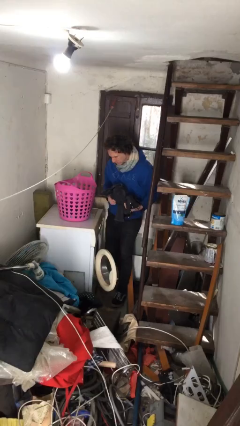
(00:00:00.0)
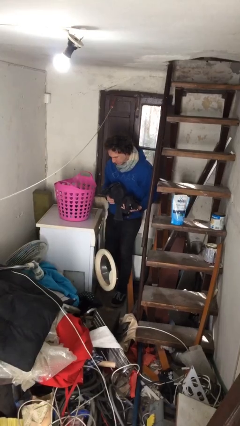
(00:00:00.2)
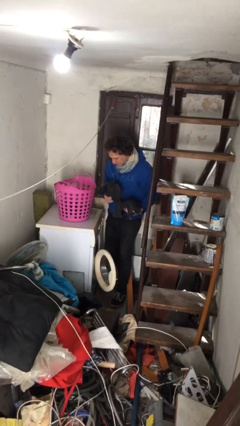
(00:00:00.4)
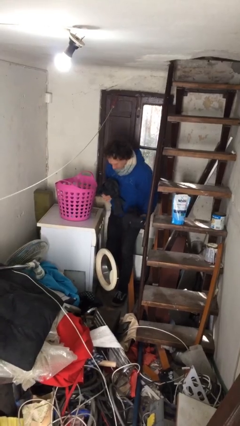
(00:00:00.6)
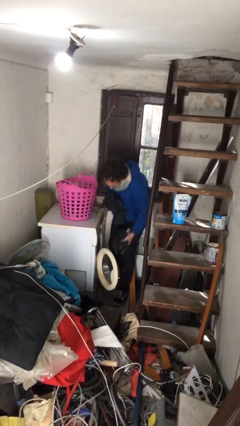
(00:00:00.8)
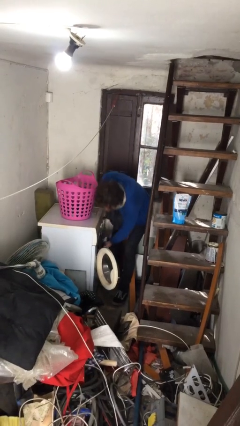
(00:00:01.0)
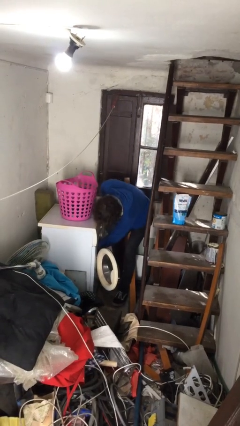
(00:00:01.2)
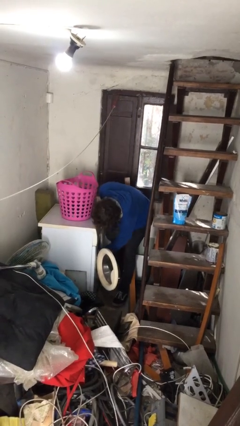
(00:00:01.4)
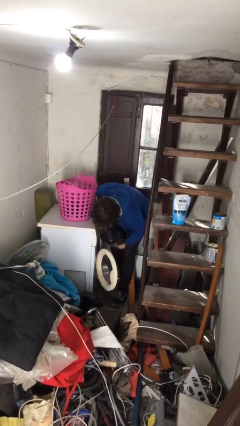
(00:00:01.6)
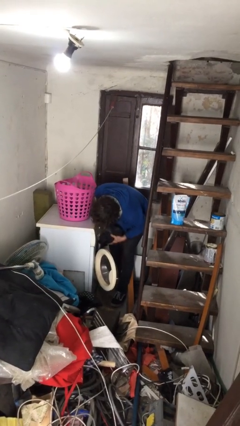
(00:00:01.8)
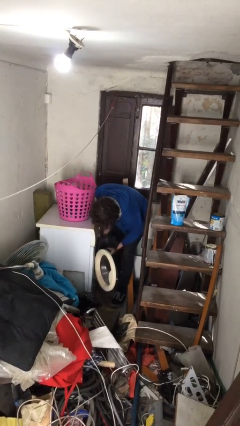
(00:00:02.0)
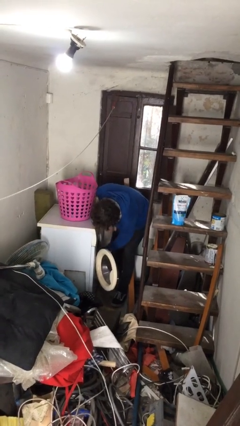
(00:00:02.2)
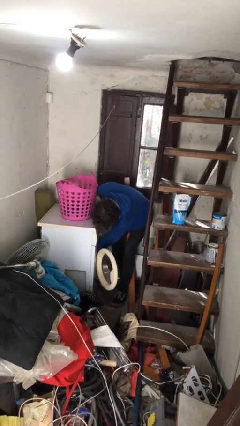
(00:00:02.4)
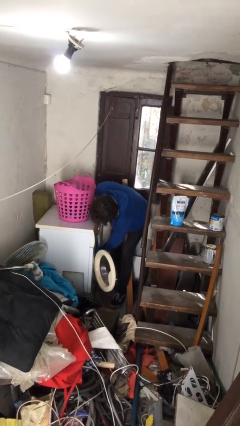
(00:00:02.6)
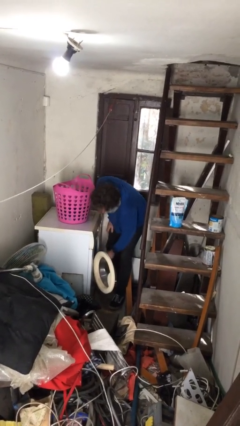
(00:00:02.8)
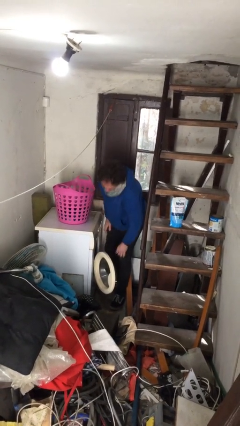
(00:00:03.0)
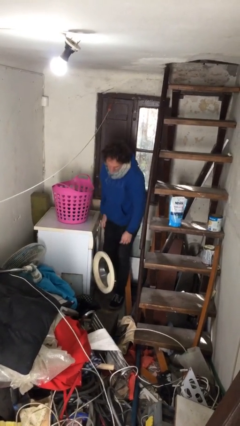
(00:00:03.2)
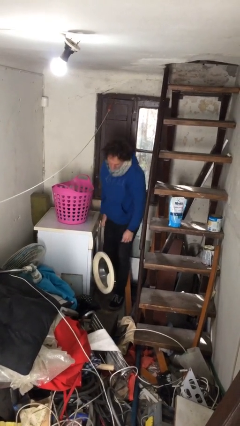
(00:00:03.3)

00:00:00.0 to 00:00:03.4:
person loads clotheswasher

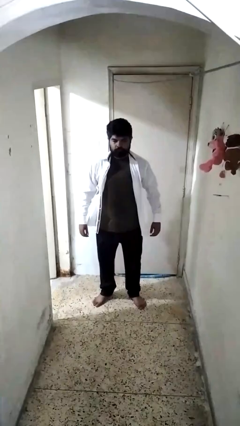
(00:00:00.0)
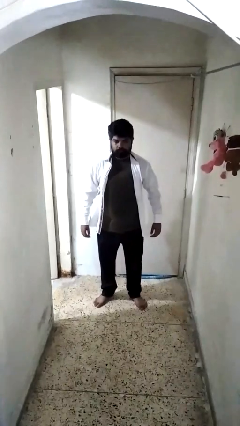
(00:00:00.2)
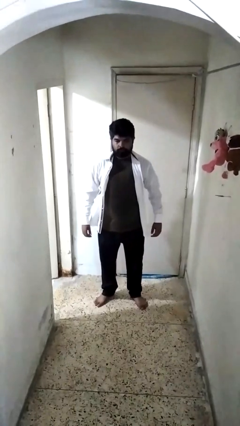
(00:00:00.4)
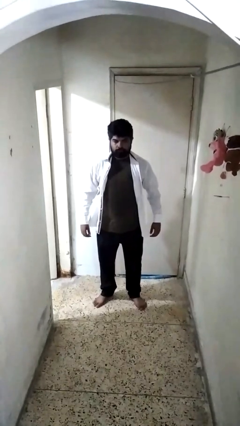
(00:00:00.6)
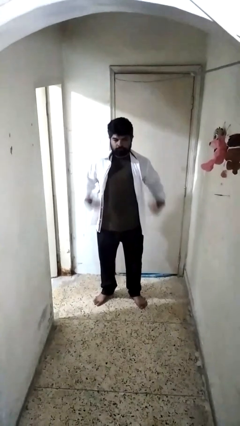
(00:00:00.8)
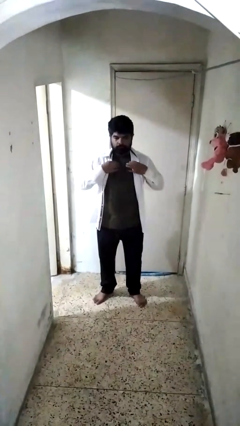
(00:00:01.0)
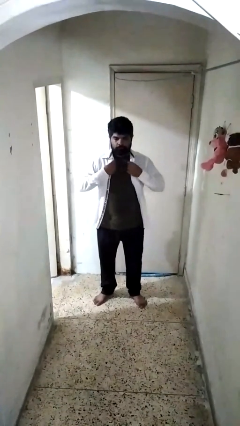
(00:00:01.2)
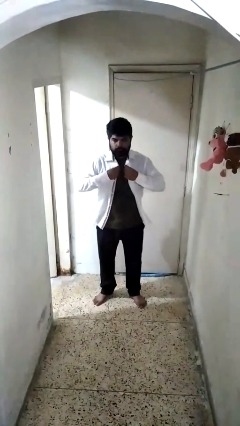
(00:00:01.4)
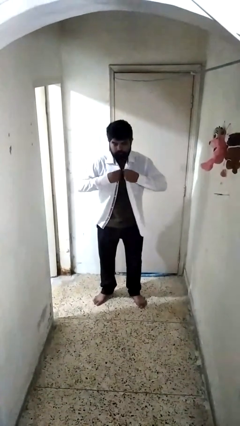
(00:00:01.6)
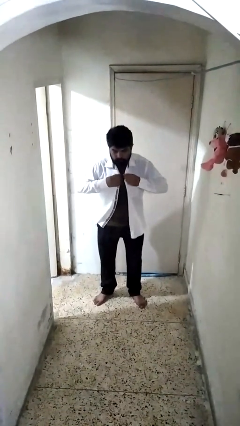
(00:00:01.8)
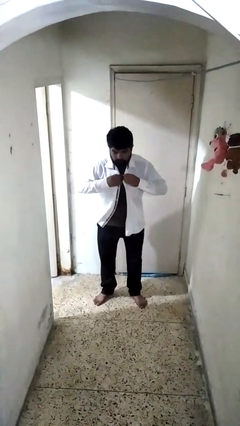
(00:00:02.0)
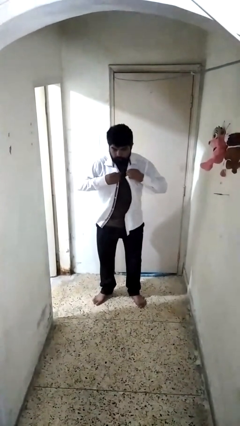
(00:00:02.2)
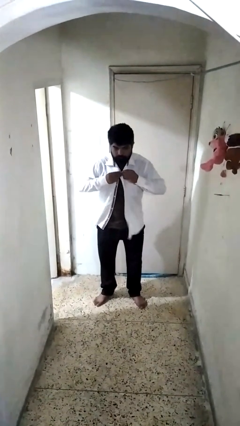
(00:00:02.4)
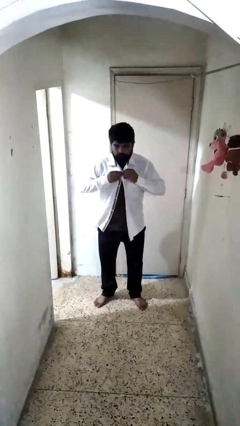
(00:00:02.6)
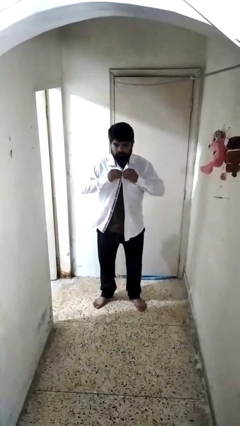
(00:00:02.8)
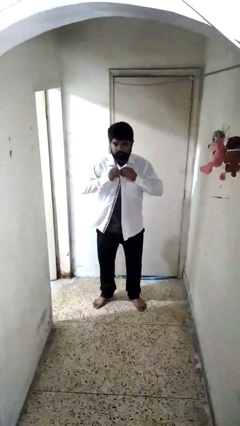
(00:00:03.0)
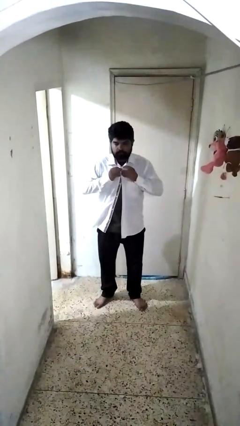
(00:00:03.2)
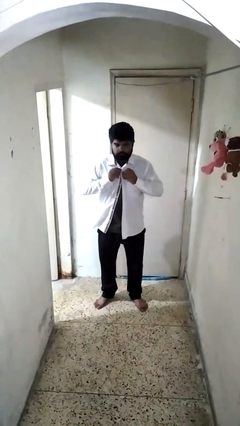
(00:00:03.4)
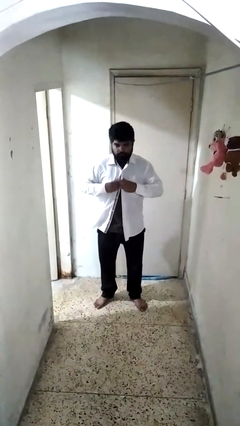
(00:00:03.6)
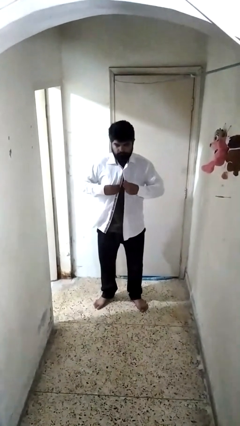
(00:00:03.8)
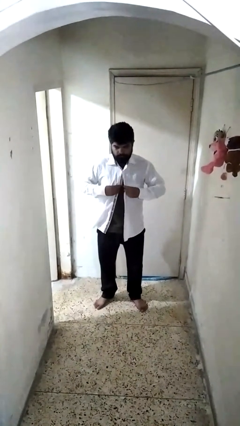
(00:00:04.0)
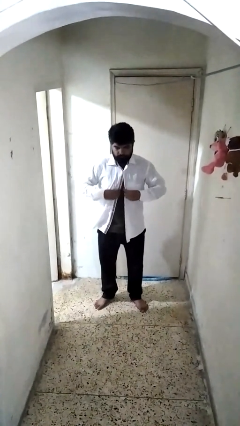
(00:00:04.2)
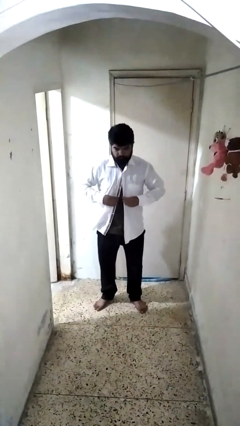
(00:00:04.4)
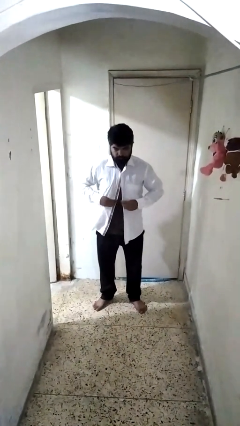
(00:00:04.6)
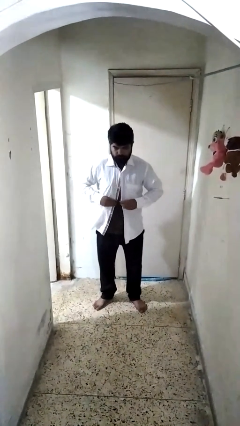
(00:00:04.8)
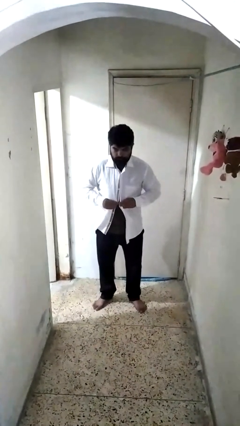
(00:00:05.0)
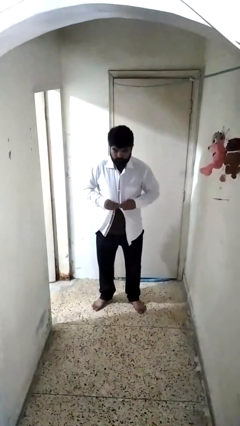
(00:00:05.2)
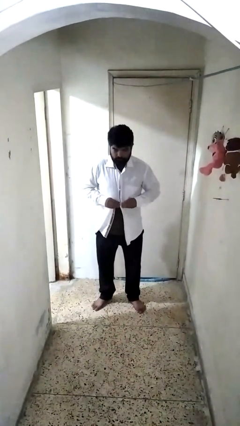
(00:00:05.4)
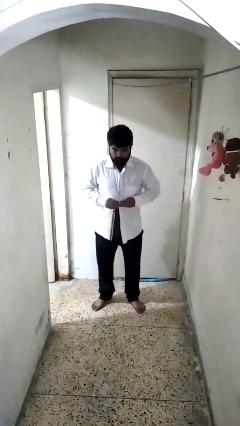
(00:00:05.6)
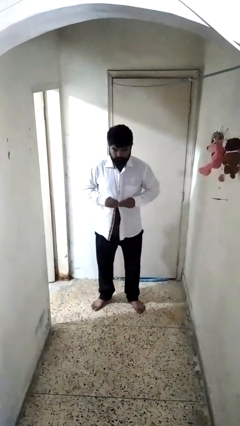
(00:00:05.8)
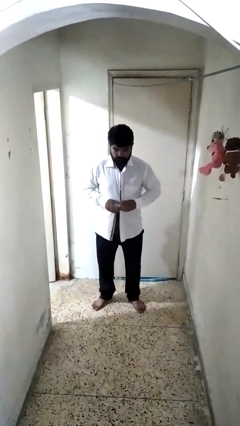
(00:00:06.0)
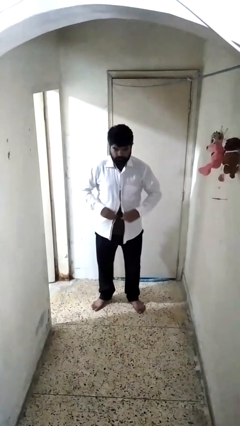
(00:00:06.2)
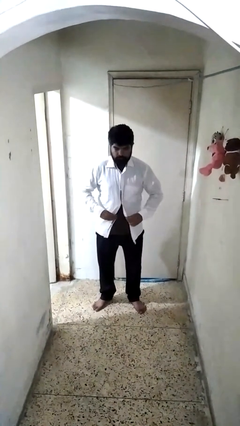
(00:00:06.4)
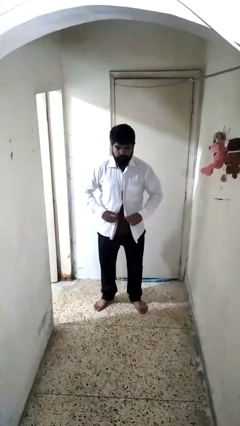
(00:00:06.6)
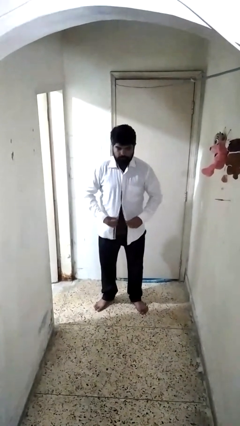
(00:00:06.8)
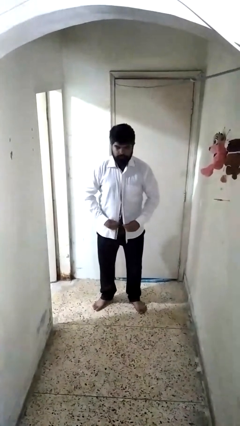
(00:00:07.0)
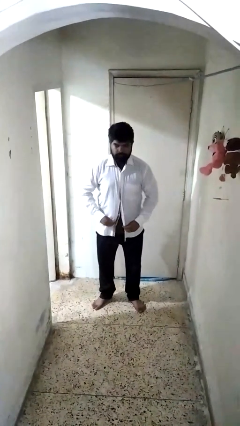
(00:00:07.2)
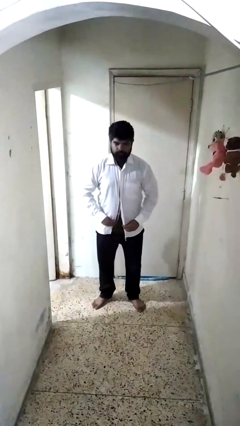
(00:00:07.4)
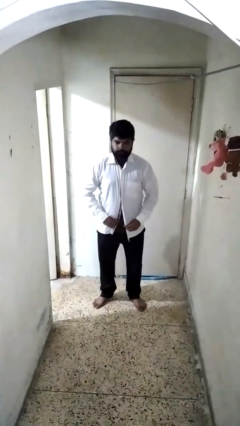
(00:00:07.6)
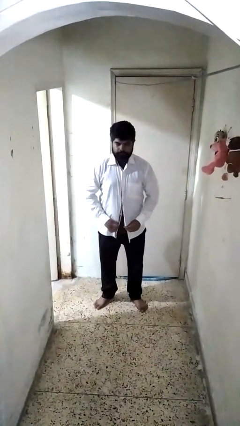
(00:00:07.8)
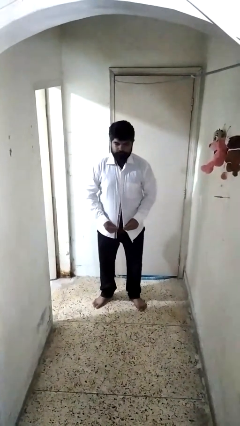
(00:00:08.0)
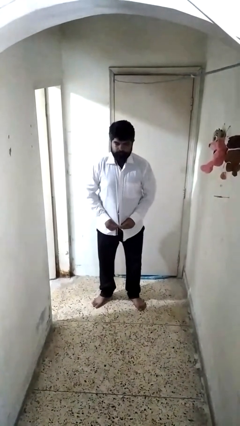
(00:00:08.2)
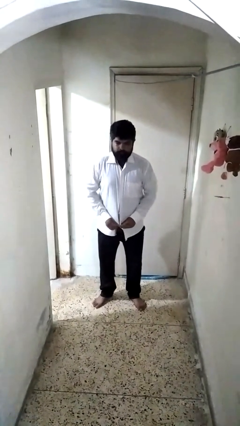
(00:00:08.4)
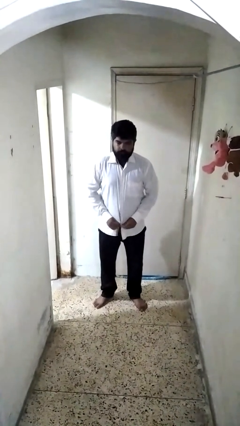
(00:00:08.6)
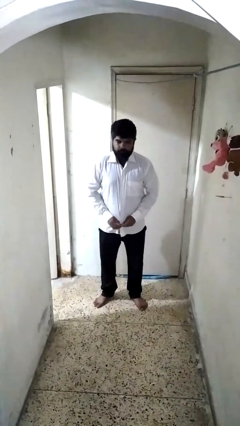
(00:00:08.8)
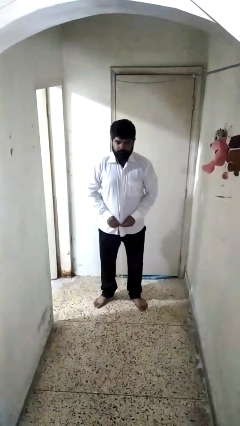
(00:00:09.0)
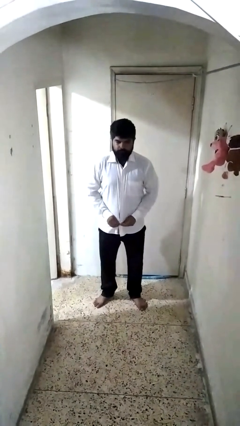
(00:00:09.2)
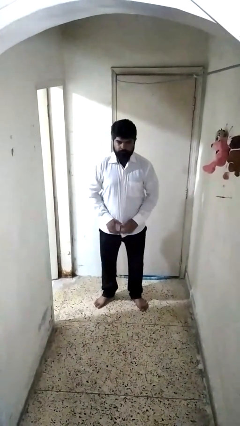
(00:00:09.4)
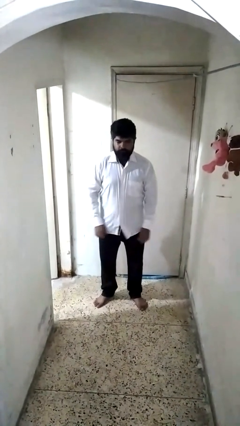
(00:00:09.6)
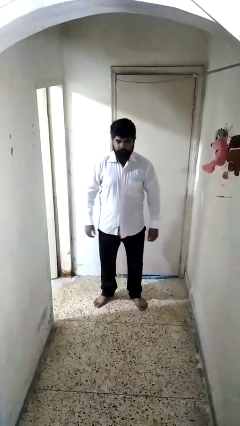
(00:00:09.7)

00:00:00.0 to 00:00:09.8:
person buttons shirt

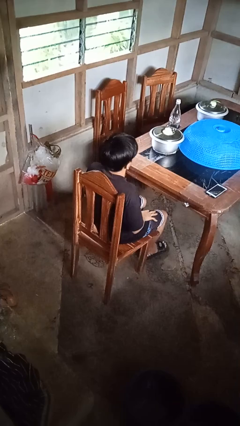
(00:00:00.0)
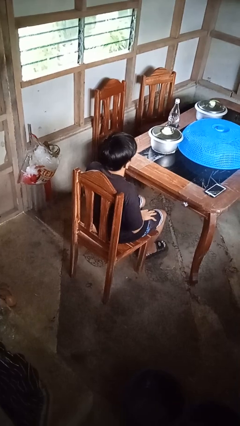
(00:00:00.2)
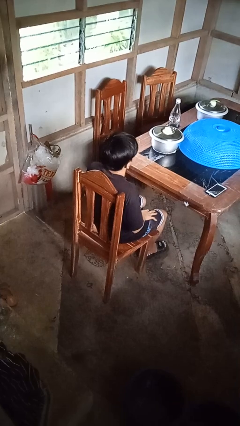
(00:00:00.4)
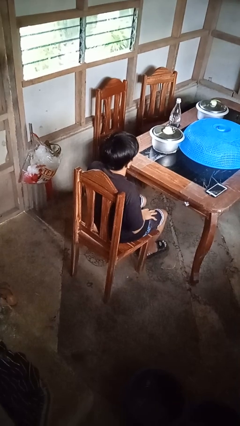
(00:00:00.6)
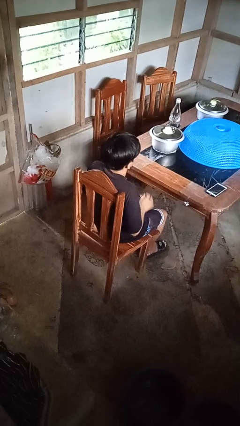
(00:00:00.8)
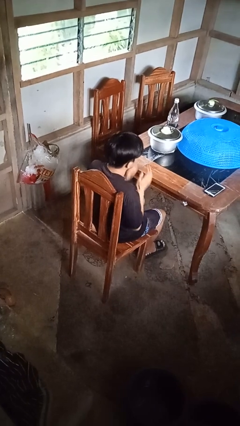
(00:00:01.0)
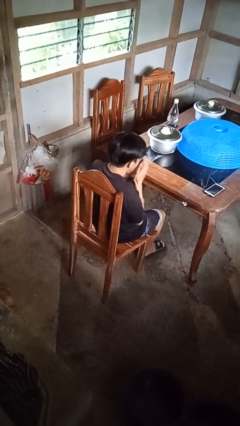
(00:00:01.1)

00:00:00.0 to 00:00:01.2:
person sneezes into hand

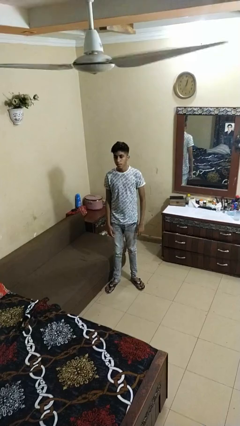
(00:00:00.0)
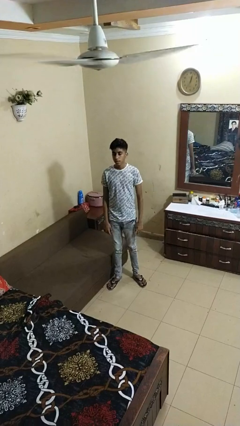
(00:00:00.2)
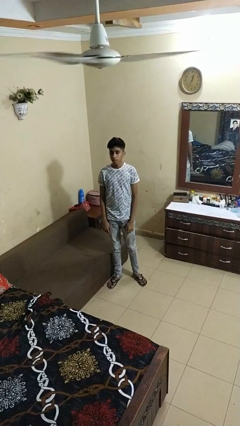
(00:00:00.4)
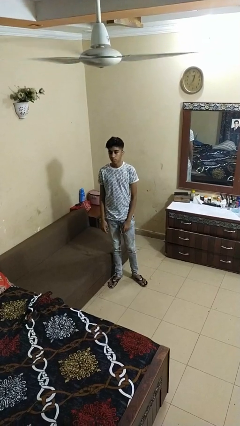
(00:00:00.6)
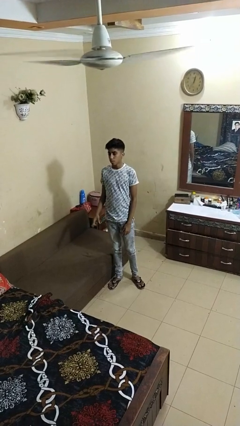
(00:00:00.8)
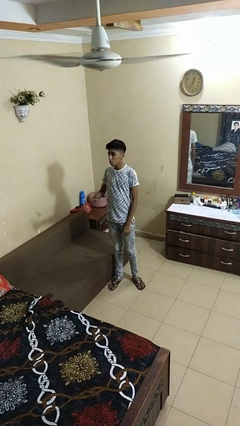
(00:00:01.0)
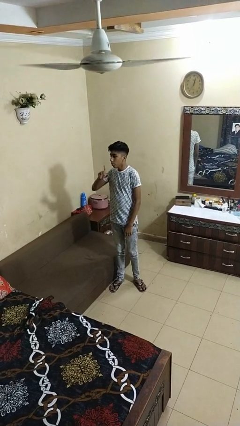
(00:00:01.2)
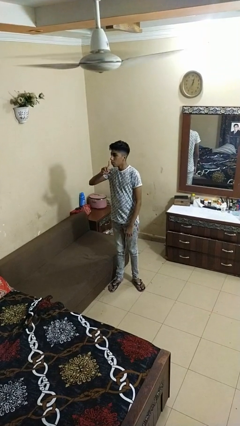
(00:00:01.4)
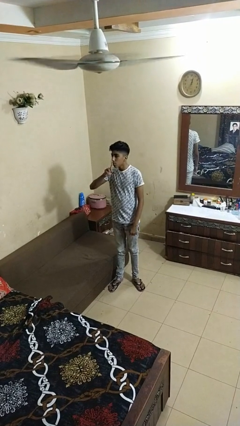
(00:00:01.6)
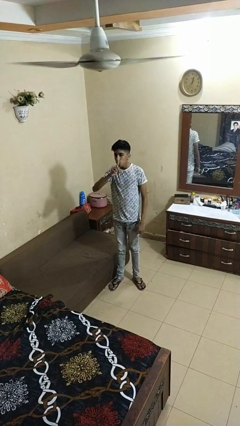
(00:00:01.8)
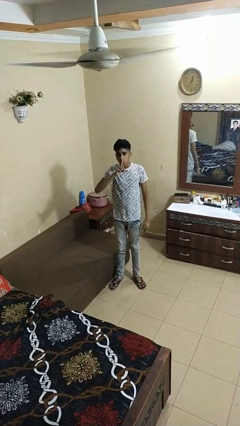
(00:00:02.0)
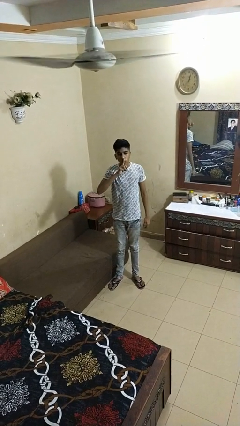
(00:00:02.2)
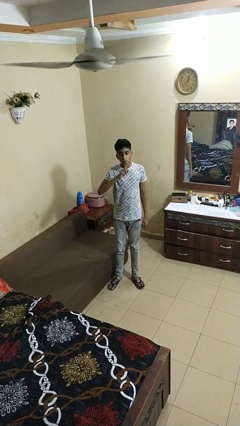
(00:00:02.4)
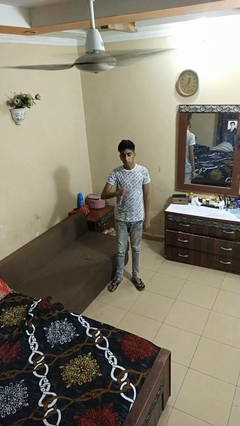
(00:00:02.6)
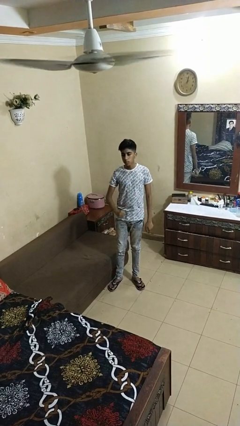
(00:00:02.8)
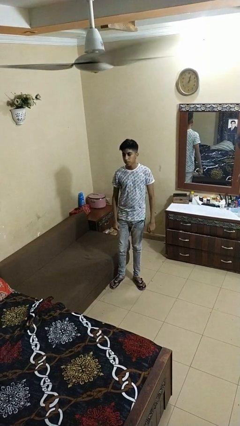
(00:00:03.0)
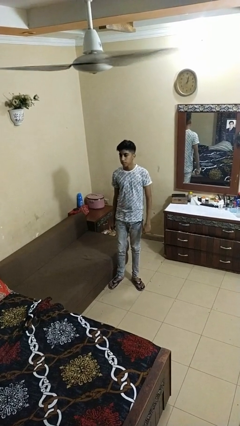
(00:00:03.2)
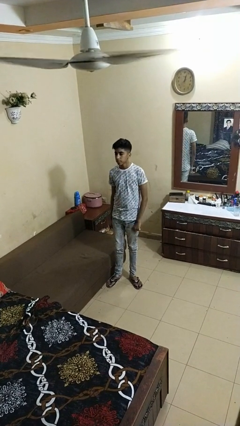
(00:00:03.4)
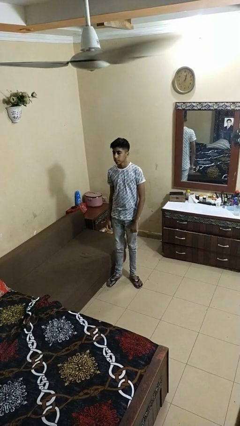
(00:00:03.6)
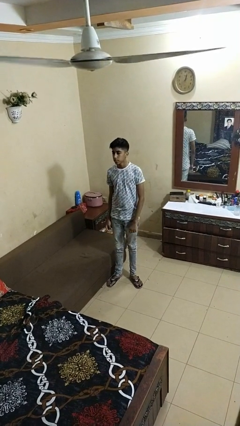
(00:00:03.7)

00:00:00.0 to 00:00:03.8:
person gestures be quiet
